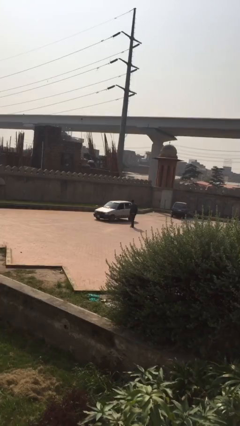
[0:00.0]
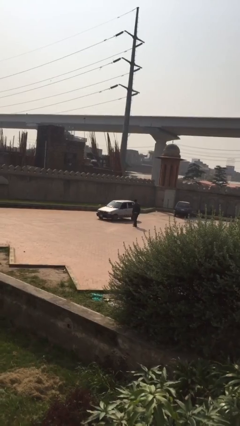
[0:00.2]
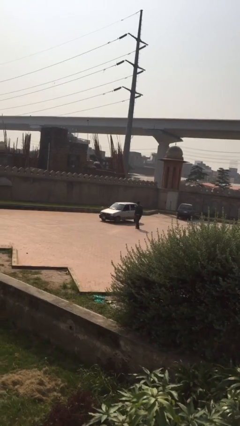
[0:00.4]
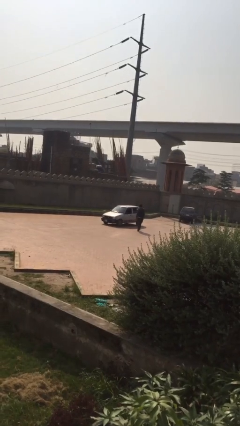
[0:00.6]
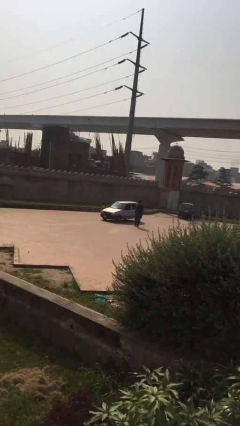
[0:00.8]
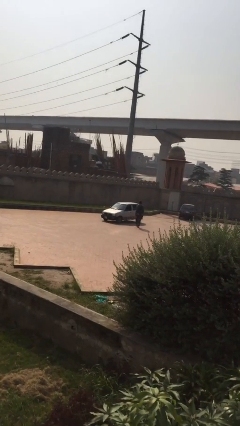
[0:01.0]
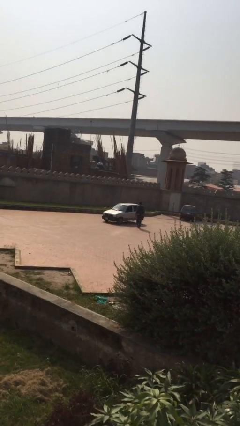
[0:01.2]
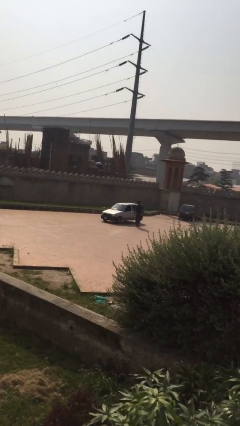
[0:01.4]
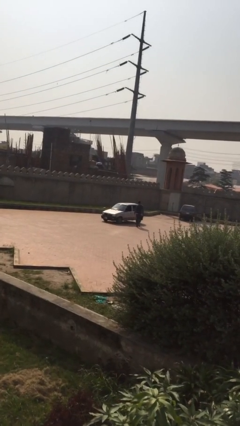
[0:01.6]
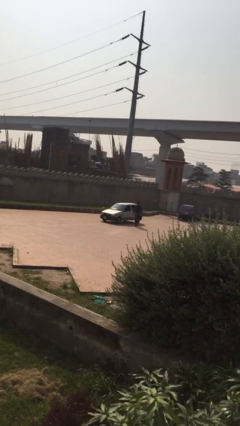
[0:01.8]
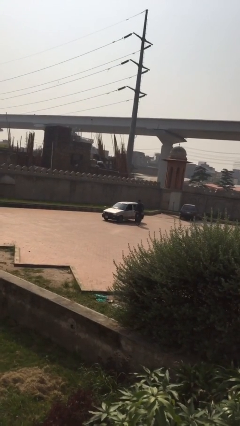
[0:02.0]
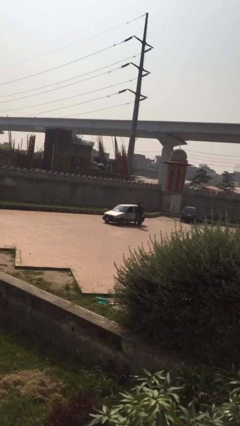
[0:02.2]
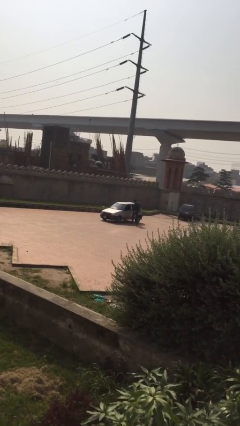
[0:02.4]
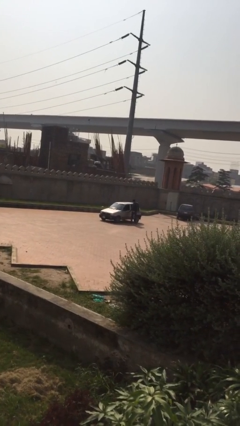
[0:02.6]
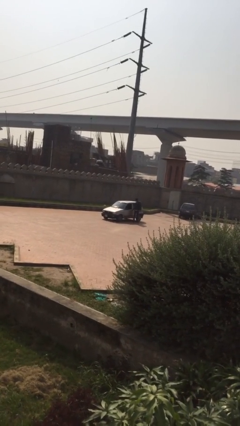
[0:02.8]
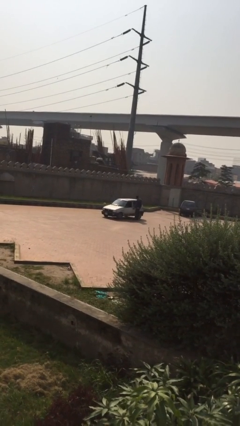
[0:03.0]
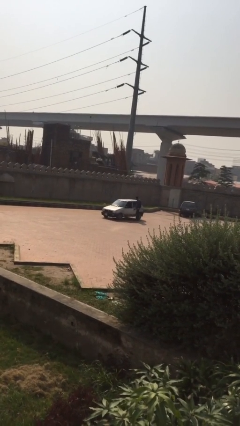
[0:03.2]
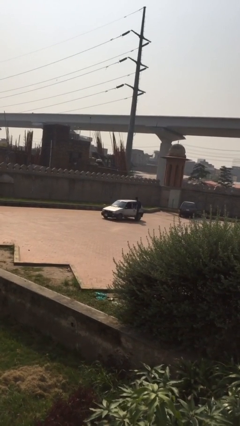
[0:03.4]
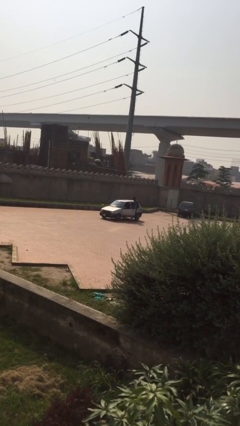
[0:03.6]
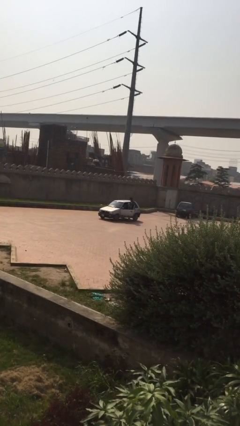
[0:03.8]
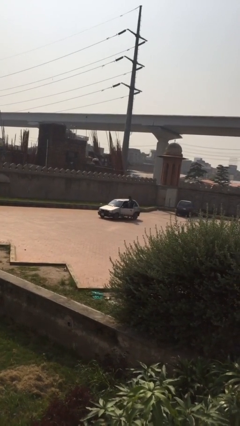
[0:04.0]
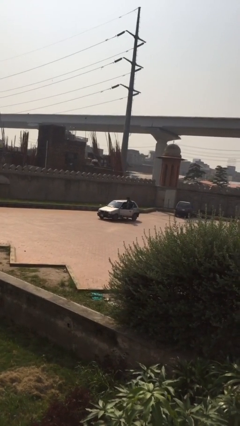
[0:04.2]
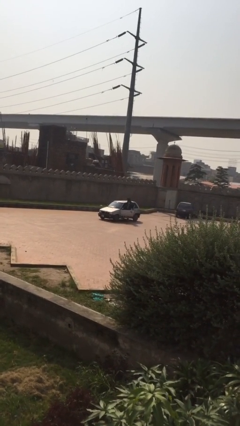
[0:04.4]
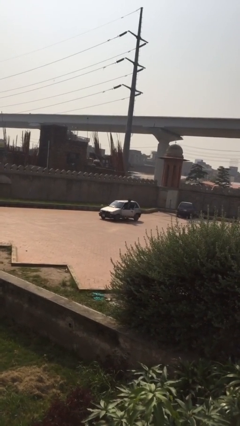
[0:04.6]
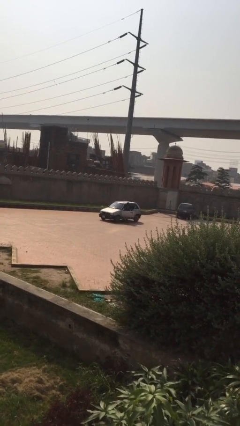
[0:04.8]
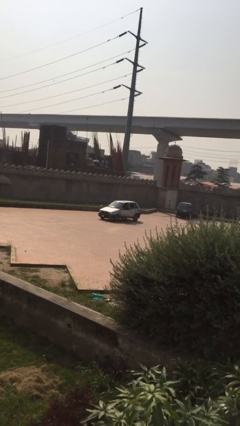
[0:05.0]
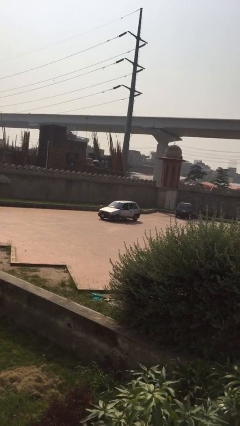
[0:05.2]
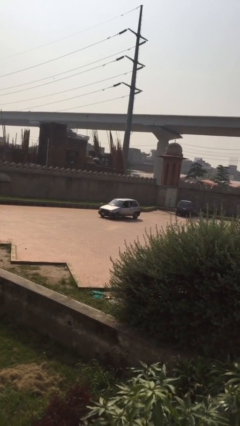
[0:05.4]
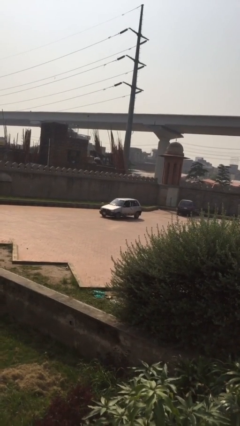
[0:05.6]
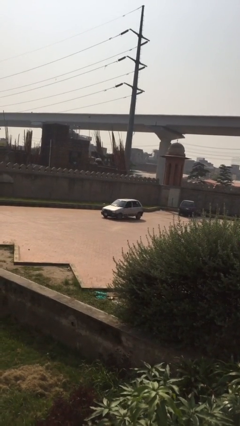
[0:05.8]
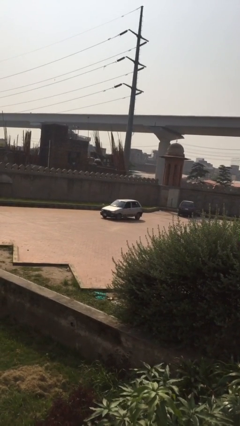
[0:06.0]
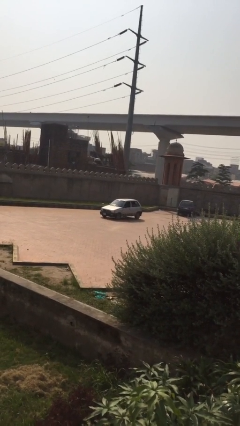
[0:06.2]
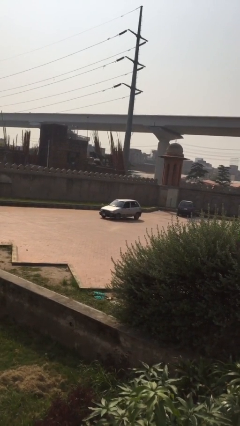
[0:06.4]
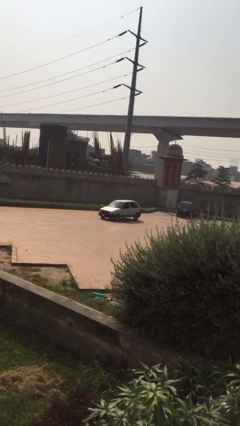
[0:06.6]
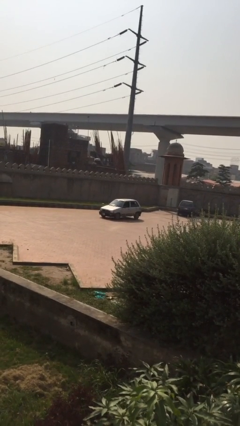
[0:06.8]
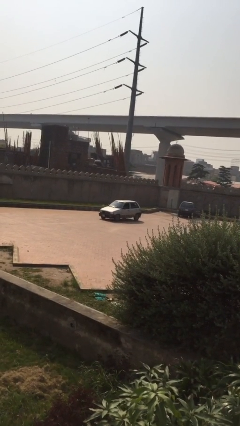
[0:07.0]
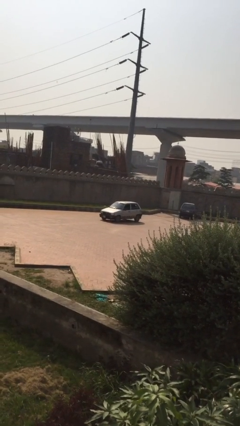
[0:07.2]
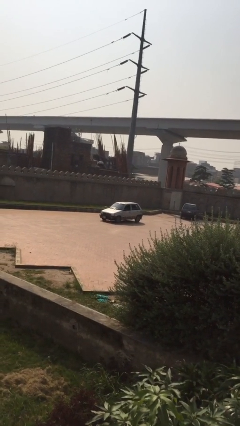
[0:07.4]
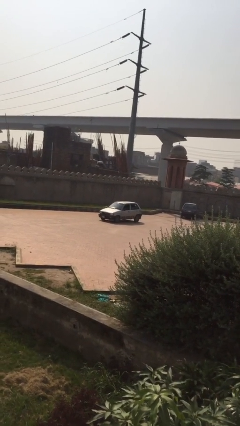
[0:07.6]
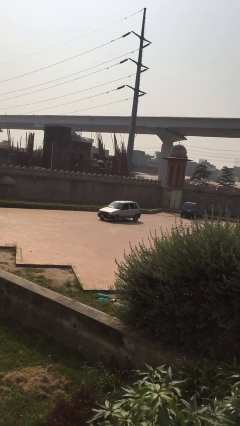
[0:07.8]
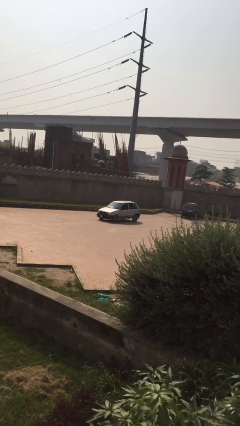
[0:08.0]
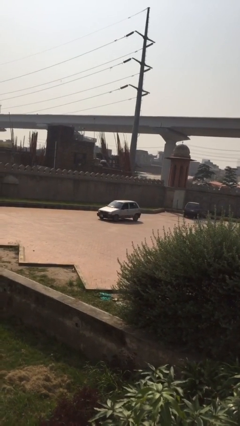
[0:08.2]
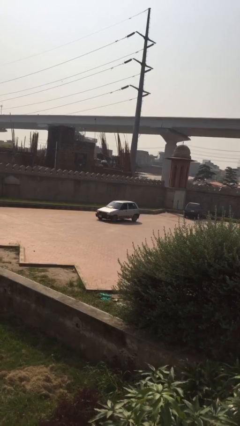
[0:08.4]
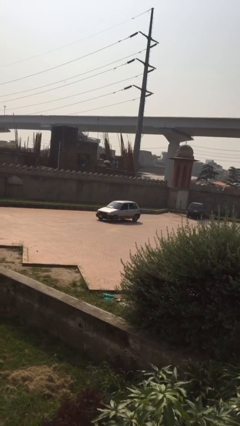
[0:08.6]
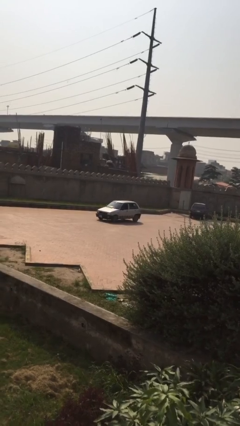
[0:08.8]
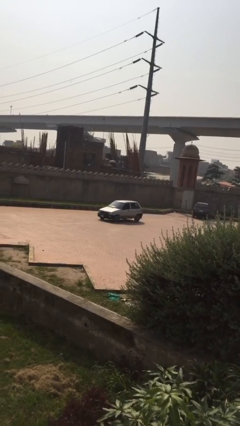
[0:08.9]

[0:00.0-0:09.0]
car picks up person

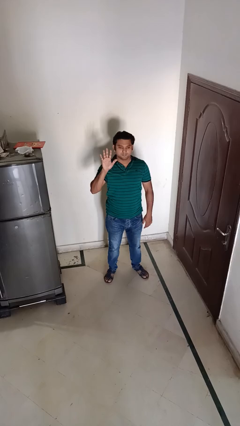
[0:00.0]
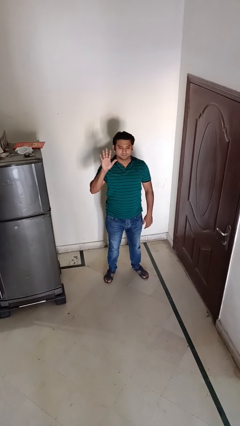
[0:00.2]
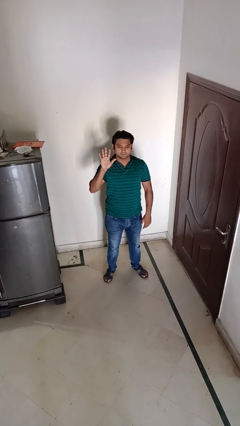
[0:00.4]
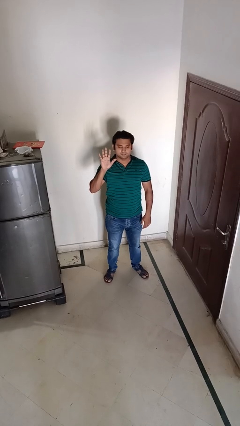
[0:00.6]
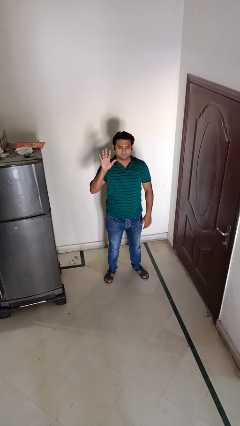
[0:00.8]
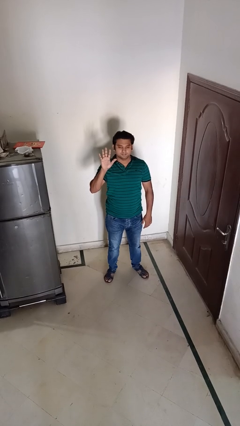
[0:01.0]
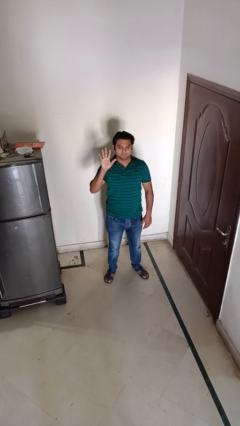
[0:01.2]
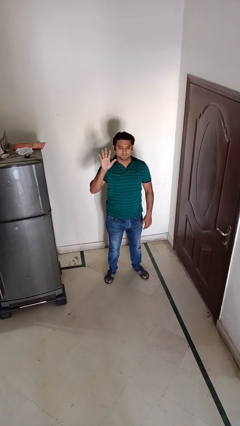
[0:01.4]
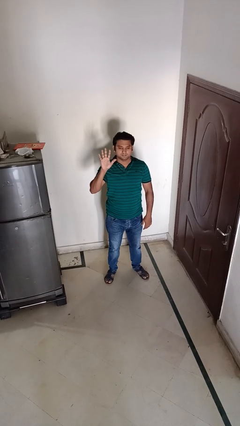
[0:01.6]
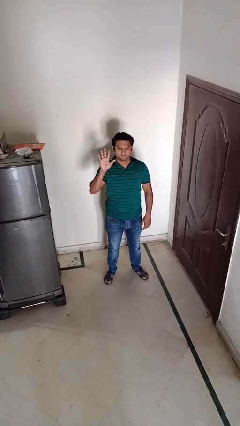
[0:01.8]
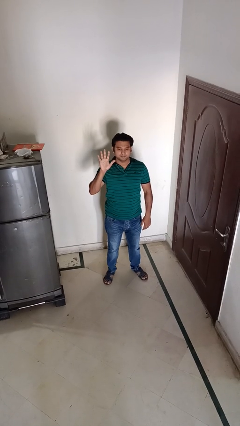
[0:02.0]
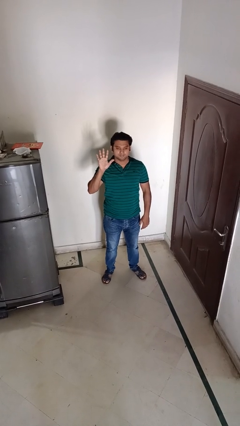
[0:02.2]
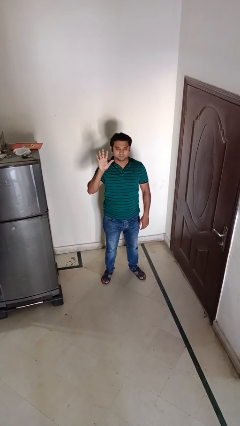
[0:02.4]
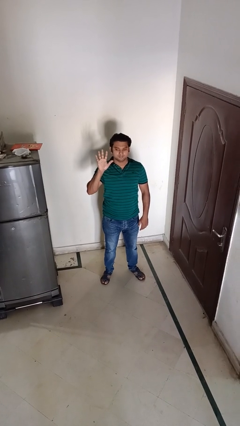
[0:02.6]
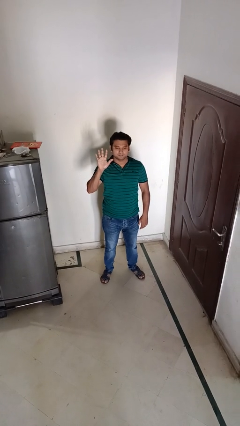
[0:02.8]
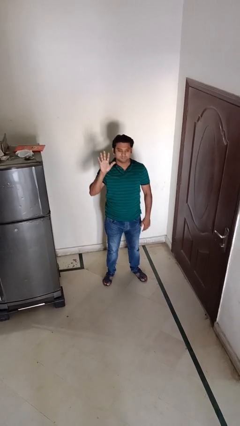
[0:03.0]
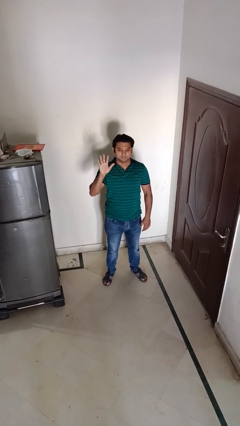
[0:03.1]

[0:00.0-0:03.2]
person gestures number five

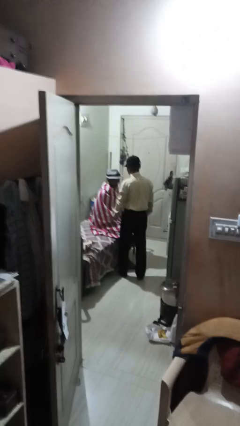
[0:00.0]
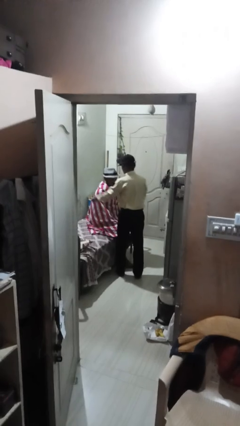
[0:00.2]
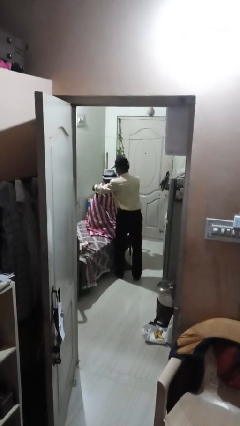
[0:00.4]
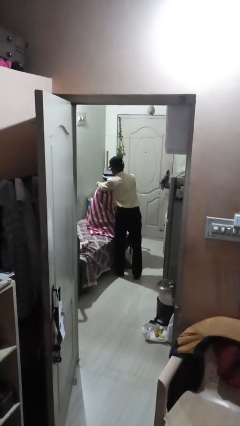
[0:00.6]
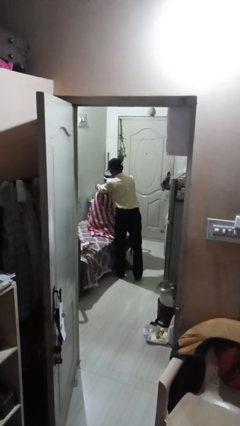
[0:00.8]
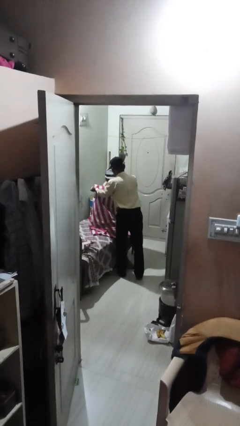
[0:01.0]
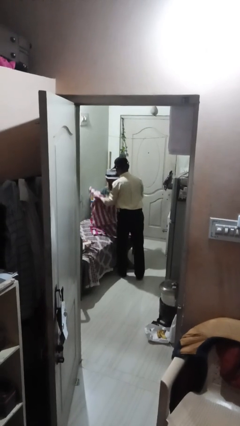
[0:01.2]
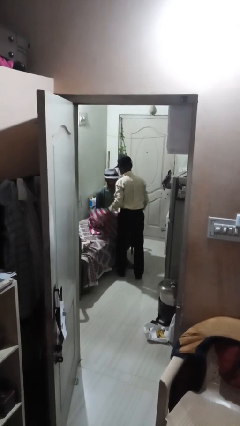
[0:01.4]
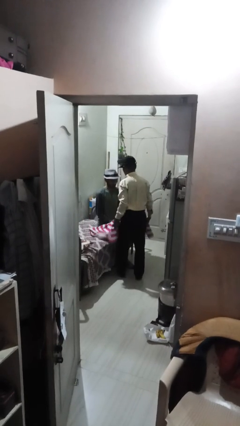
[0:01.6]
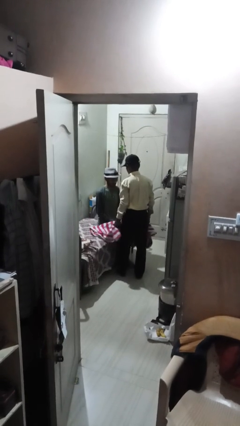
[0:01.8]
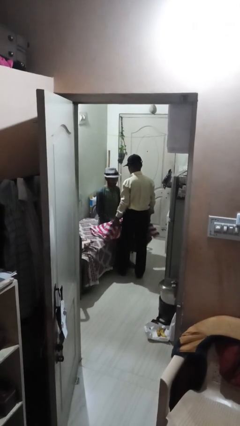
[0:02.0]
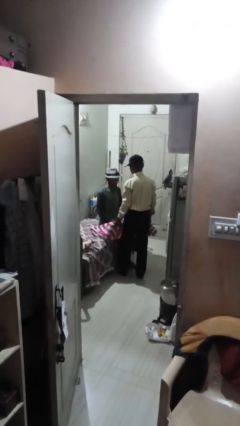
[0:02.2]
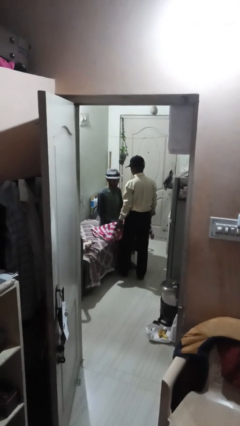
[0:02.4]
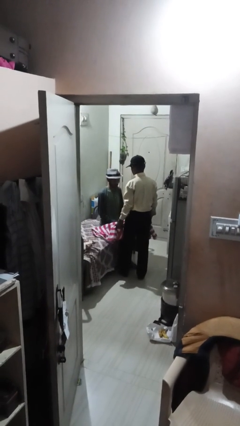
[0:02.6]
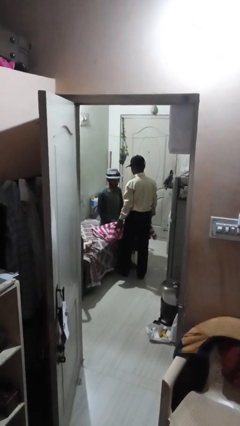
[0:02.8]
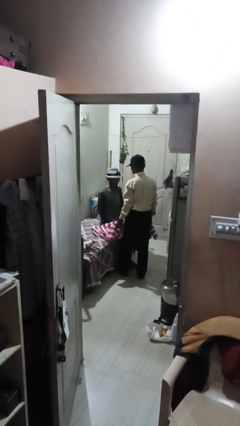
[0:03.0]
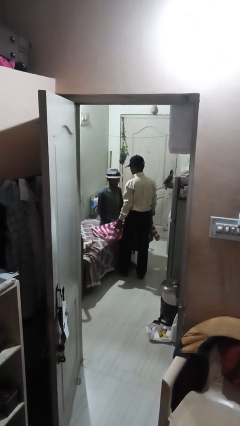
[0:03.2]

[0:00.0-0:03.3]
person uncovers friend with blanket

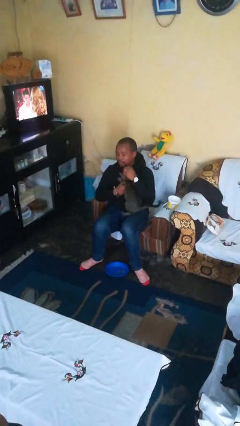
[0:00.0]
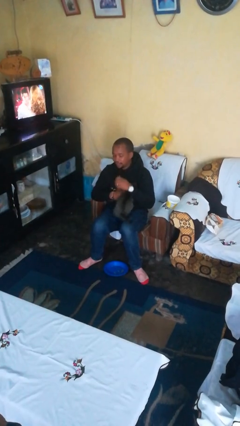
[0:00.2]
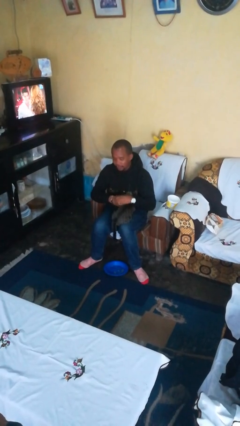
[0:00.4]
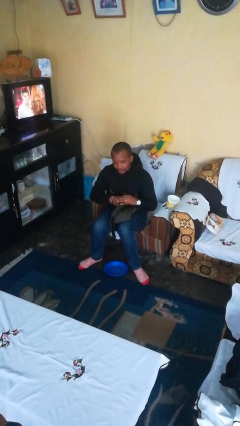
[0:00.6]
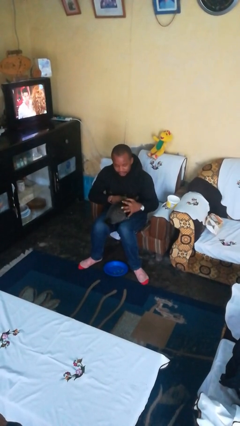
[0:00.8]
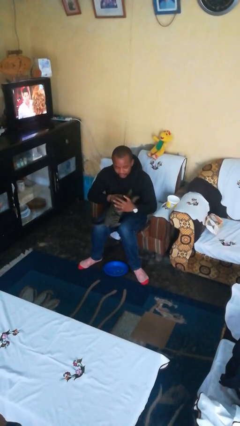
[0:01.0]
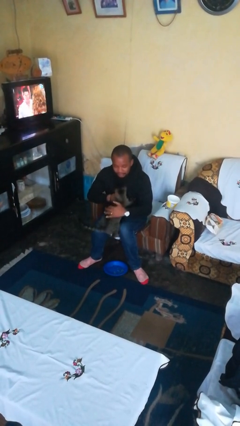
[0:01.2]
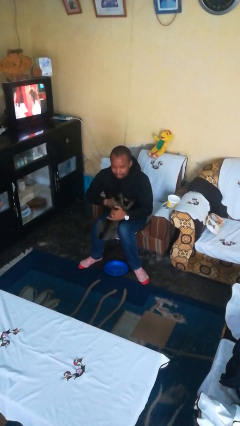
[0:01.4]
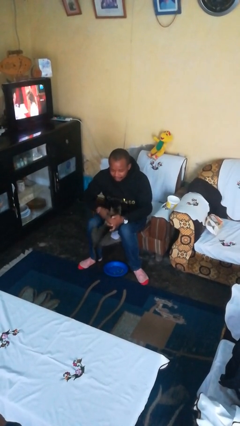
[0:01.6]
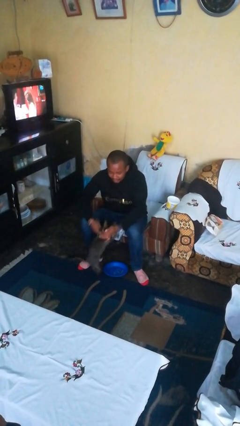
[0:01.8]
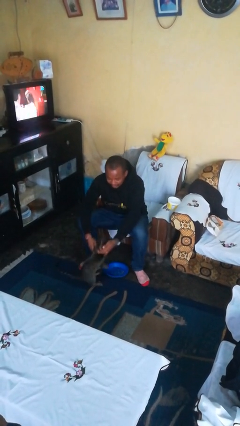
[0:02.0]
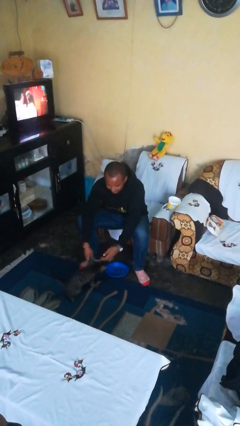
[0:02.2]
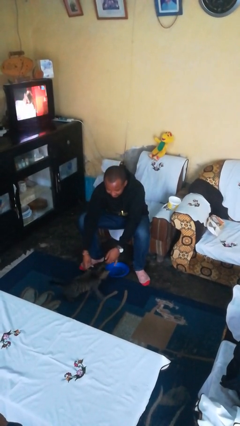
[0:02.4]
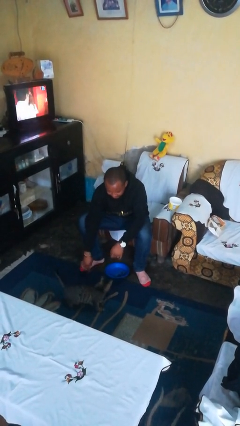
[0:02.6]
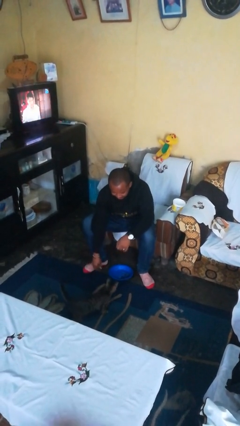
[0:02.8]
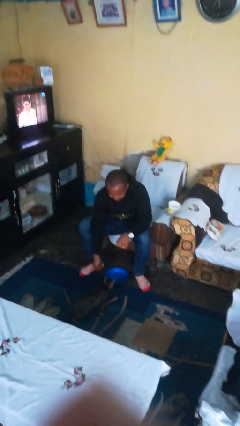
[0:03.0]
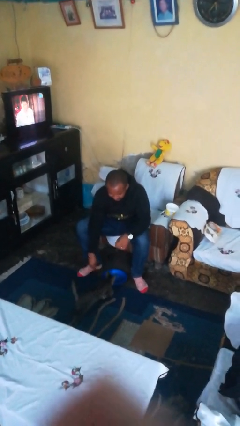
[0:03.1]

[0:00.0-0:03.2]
person hugs cat
